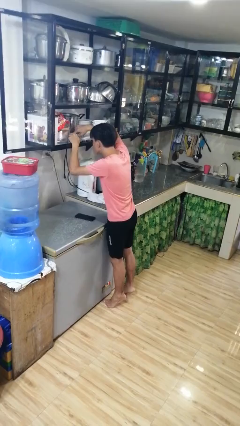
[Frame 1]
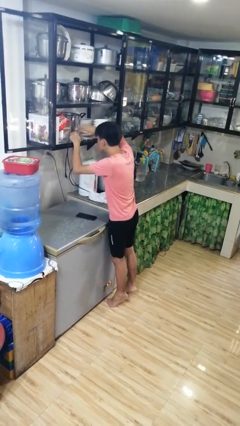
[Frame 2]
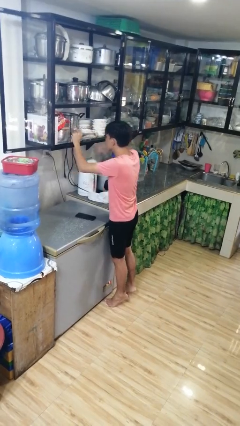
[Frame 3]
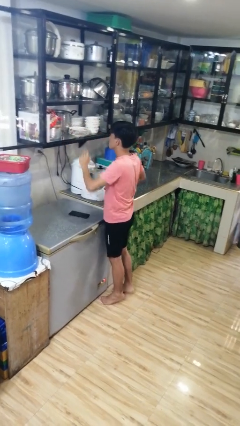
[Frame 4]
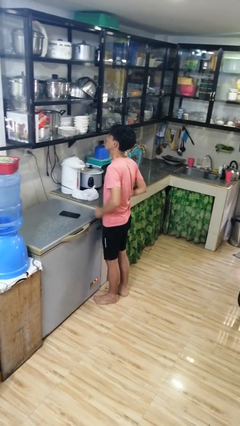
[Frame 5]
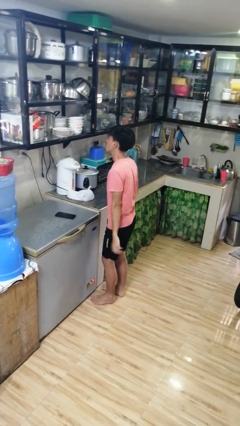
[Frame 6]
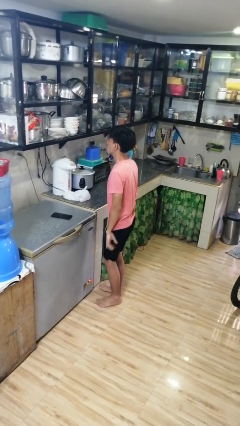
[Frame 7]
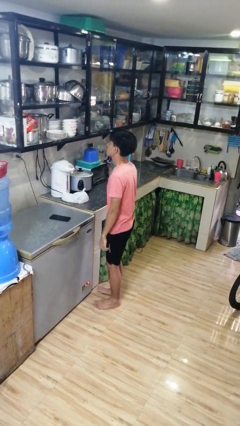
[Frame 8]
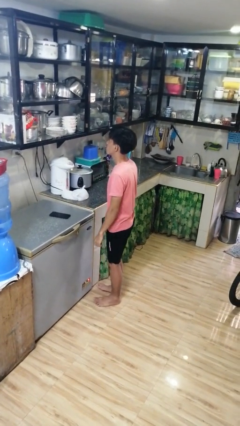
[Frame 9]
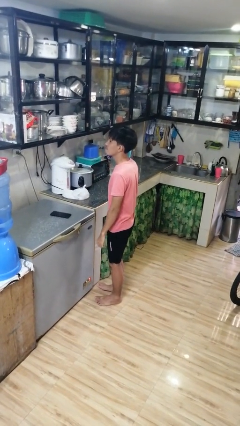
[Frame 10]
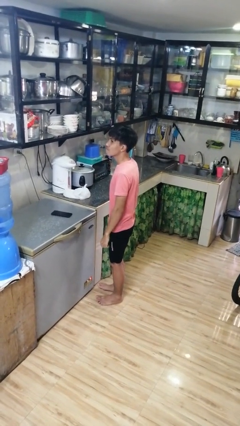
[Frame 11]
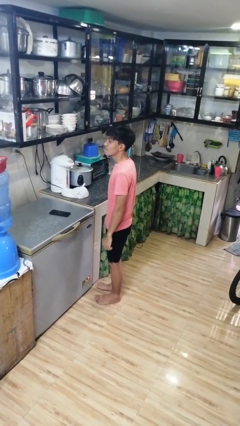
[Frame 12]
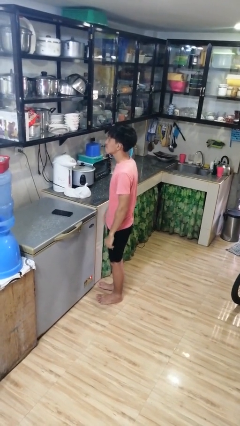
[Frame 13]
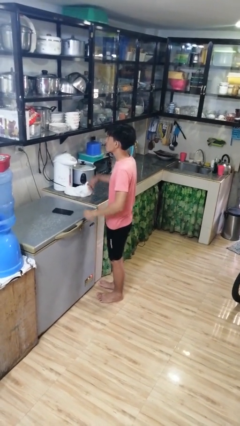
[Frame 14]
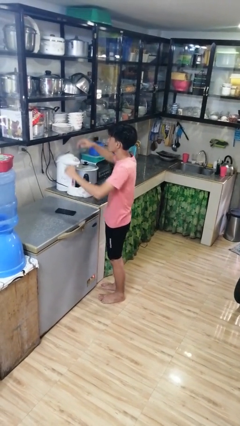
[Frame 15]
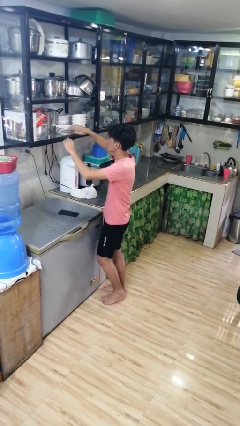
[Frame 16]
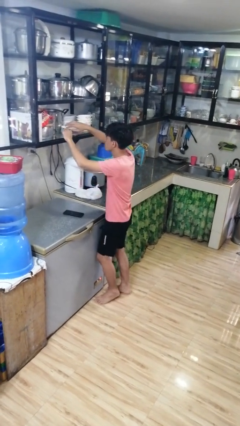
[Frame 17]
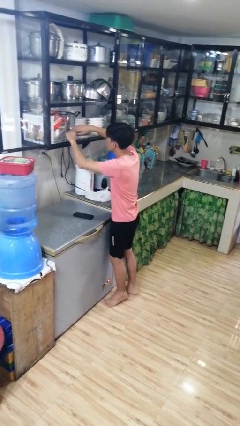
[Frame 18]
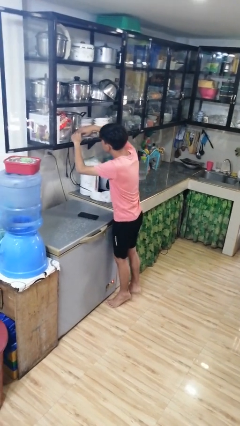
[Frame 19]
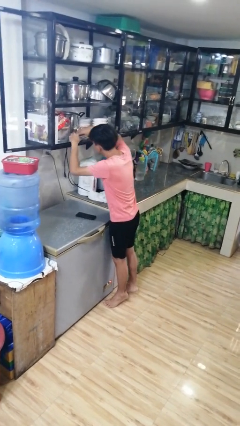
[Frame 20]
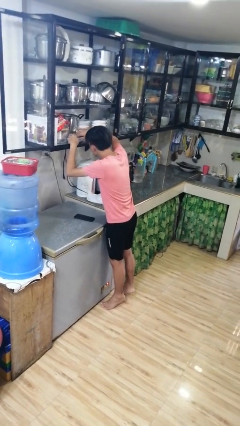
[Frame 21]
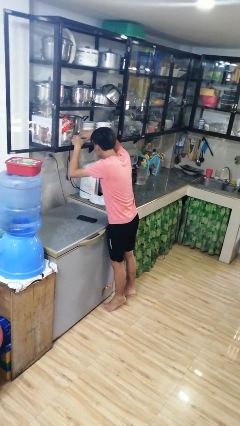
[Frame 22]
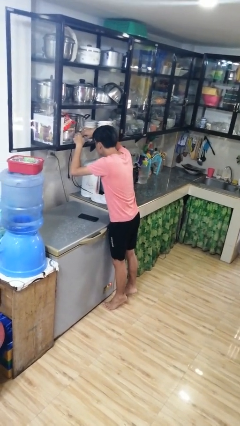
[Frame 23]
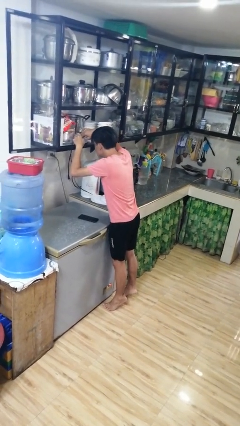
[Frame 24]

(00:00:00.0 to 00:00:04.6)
person puts on backpack

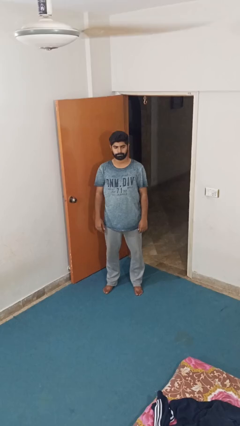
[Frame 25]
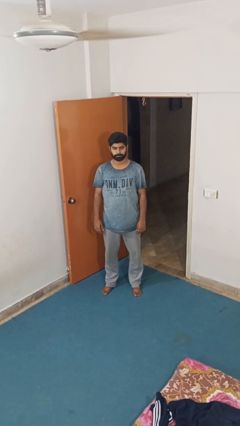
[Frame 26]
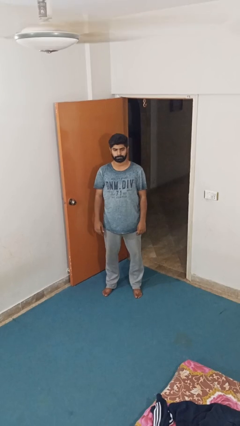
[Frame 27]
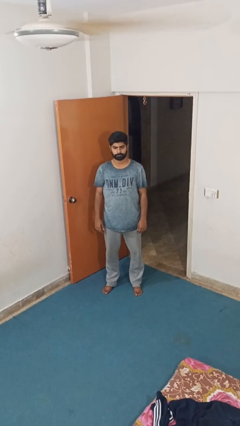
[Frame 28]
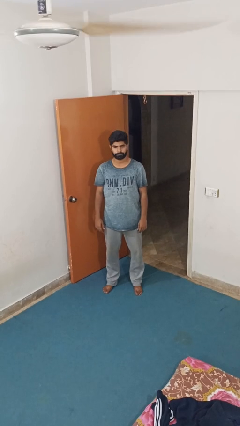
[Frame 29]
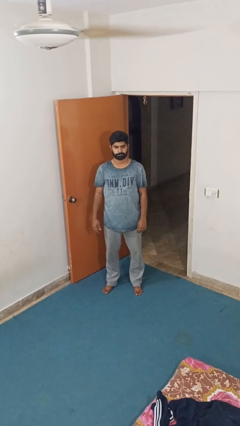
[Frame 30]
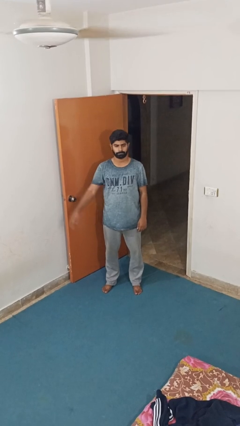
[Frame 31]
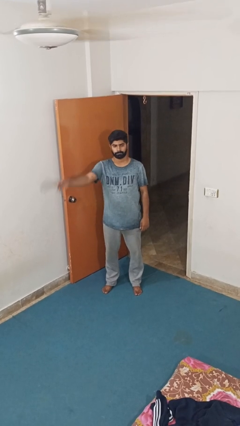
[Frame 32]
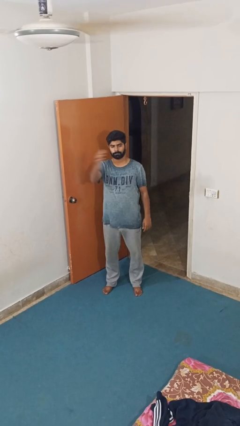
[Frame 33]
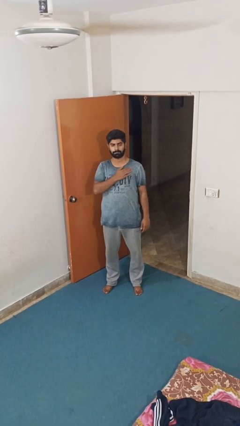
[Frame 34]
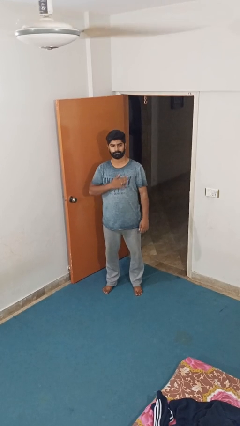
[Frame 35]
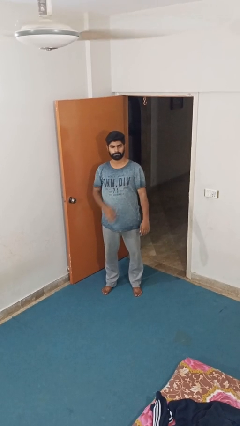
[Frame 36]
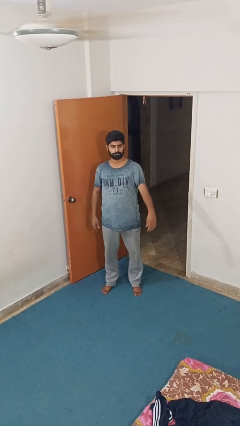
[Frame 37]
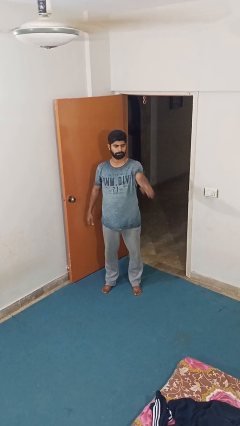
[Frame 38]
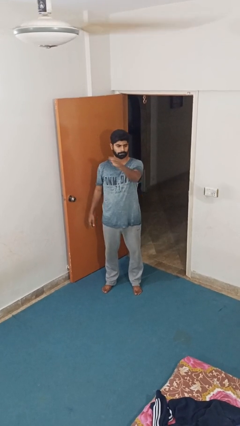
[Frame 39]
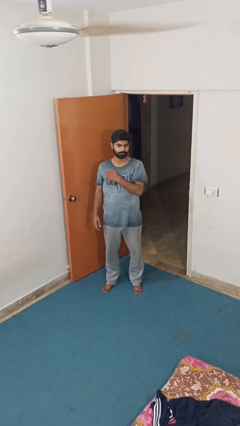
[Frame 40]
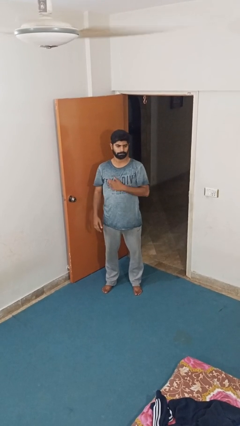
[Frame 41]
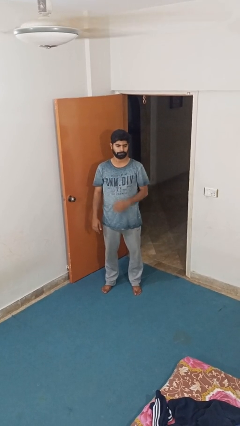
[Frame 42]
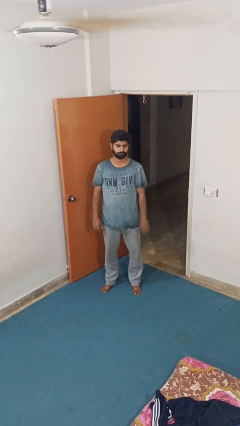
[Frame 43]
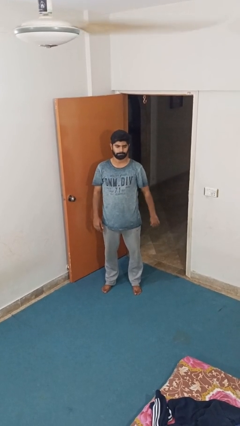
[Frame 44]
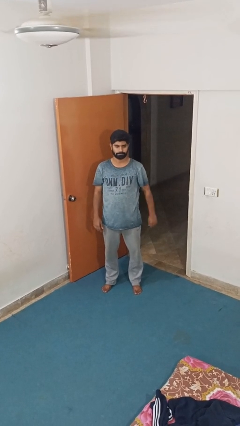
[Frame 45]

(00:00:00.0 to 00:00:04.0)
person drums on chest

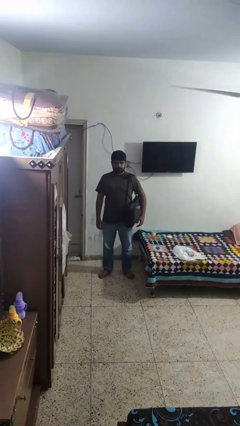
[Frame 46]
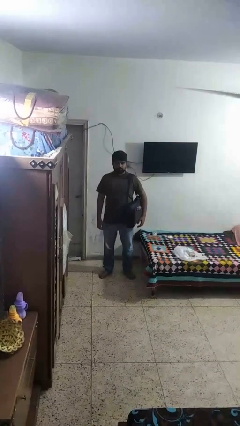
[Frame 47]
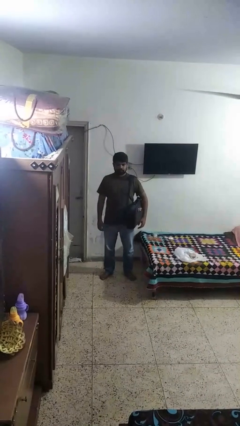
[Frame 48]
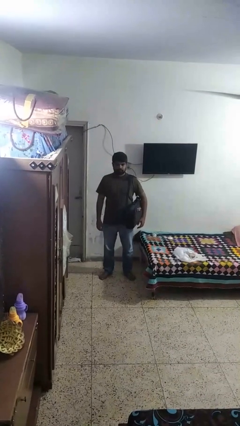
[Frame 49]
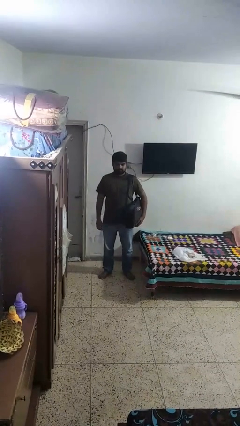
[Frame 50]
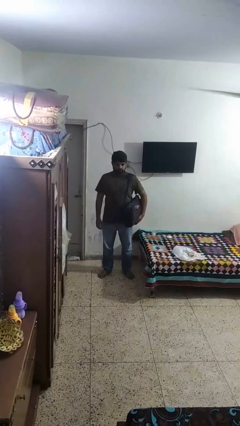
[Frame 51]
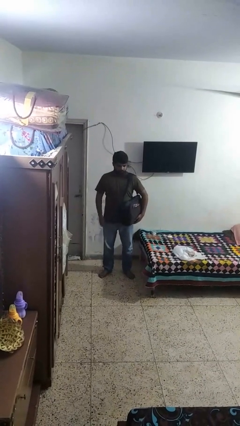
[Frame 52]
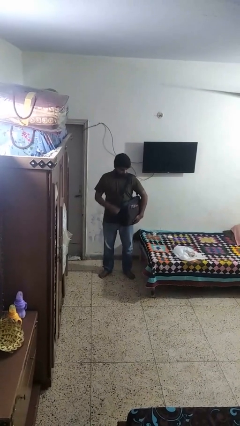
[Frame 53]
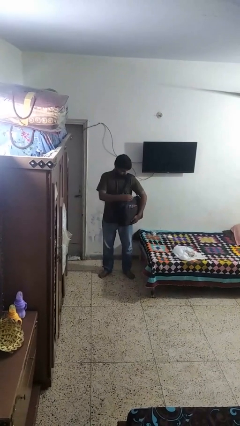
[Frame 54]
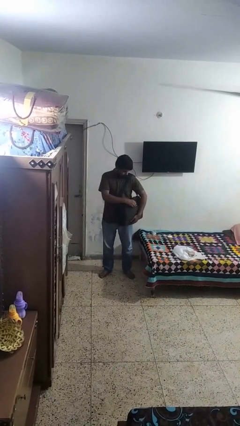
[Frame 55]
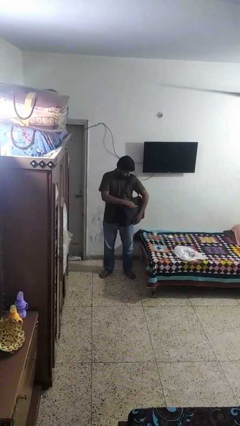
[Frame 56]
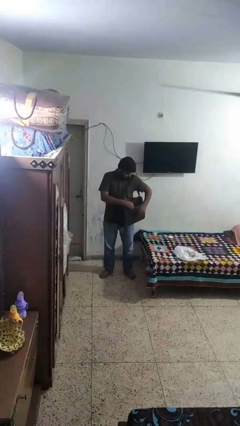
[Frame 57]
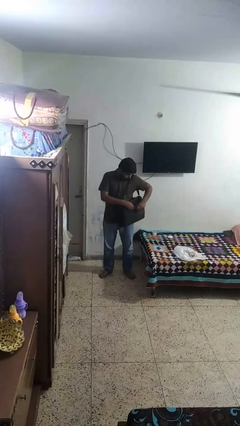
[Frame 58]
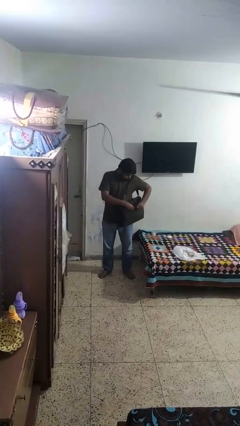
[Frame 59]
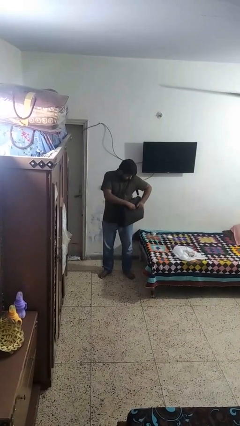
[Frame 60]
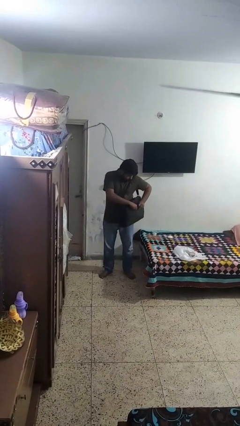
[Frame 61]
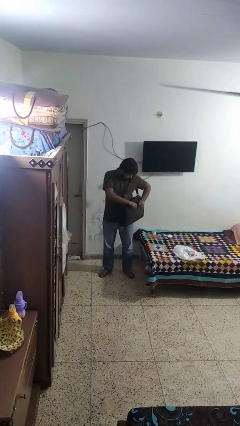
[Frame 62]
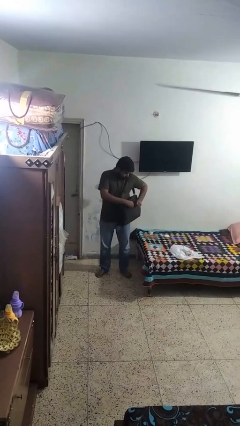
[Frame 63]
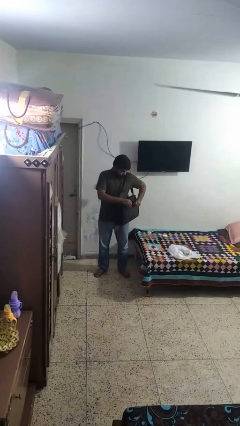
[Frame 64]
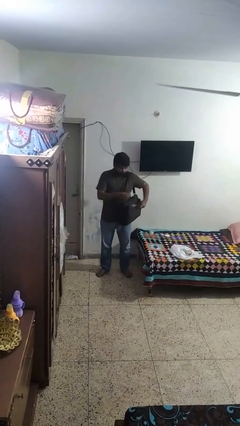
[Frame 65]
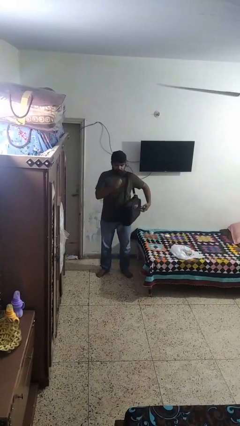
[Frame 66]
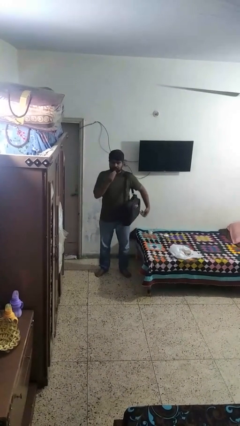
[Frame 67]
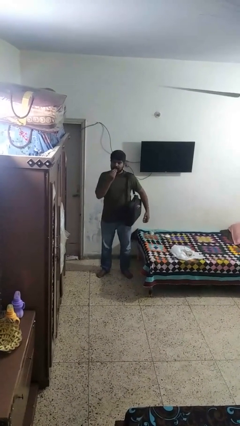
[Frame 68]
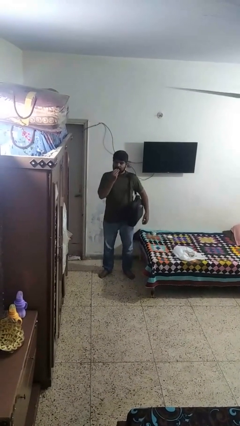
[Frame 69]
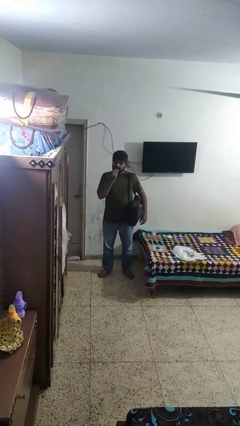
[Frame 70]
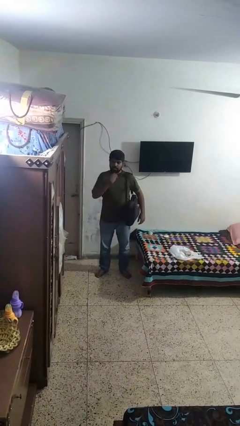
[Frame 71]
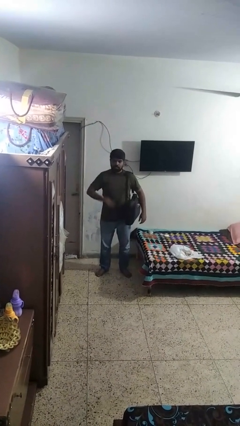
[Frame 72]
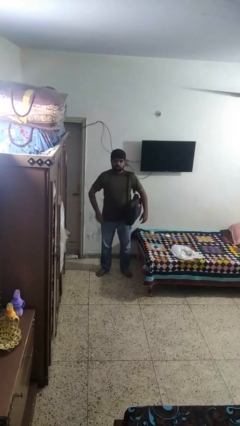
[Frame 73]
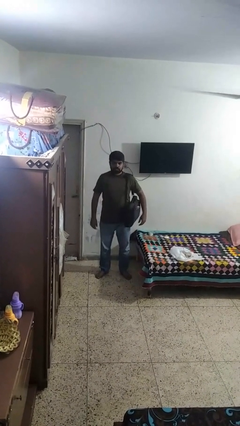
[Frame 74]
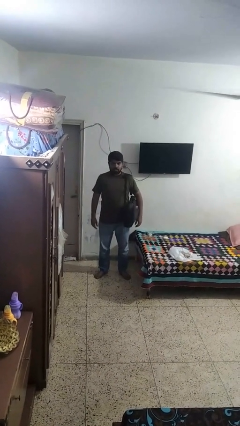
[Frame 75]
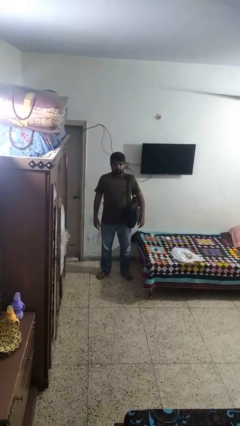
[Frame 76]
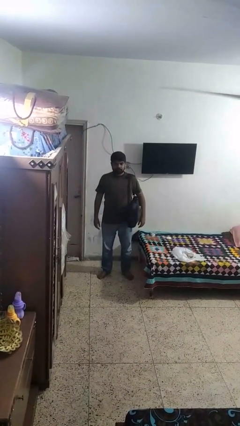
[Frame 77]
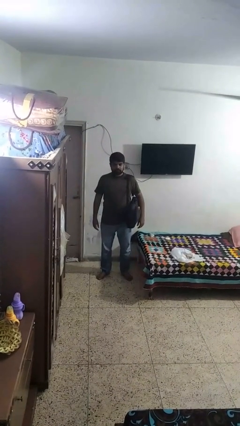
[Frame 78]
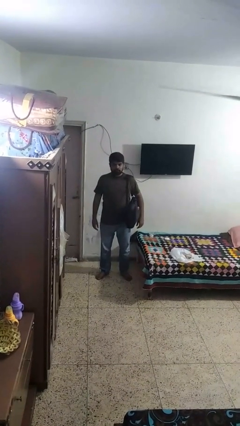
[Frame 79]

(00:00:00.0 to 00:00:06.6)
person eats snack from bag

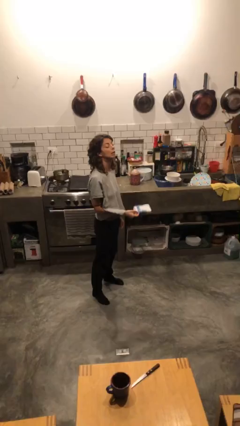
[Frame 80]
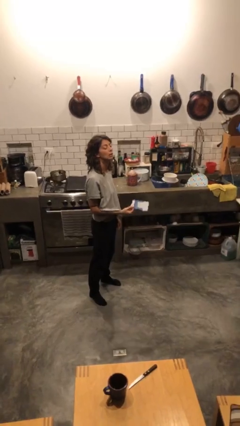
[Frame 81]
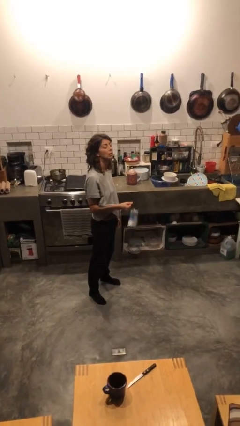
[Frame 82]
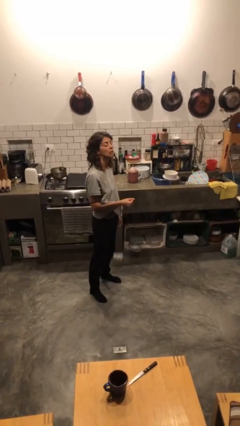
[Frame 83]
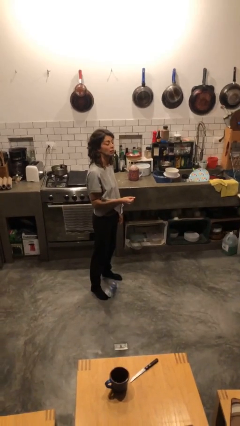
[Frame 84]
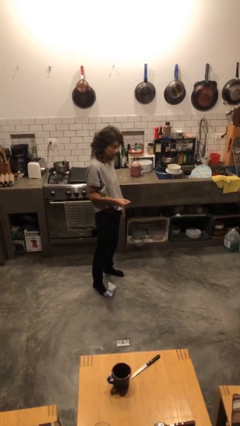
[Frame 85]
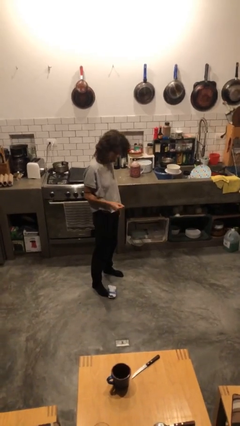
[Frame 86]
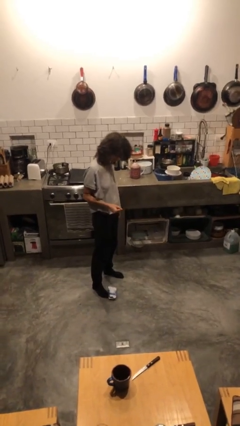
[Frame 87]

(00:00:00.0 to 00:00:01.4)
person drops object

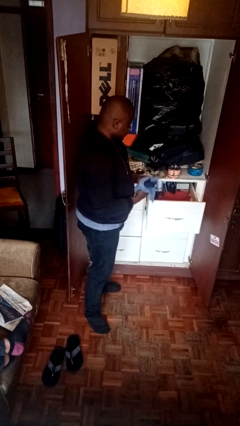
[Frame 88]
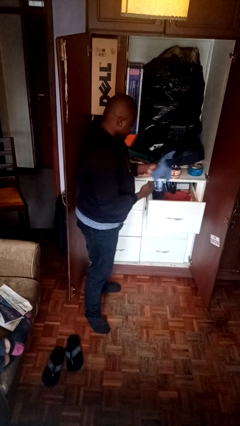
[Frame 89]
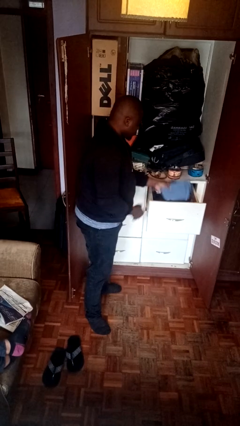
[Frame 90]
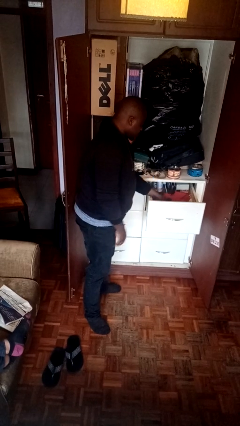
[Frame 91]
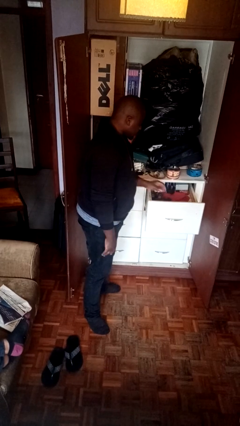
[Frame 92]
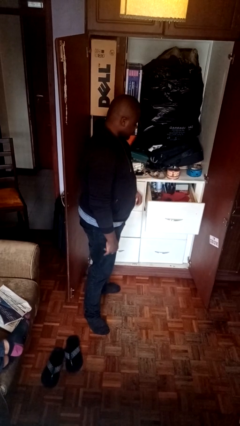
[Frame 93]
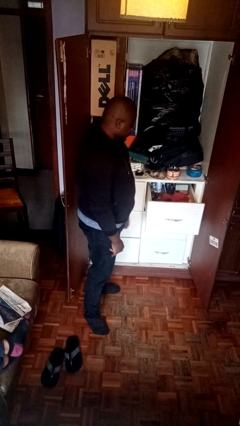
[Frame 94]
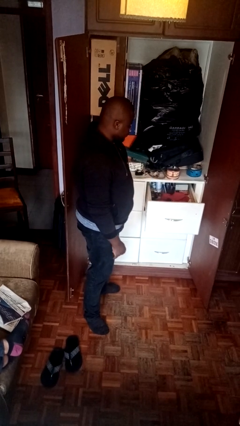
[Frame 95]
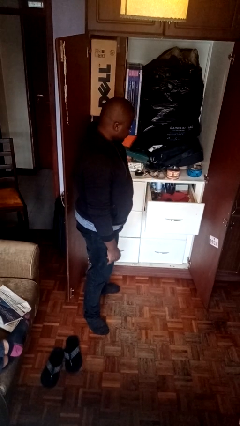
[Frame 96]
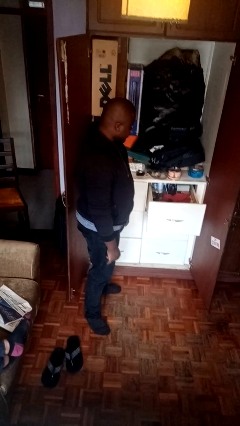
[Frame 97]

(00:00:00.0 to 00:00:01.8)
person puts clothes into dresser
